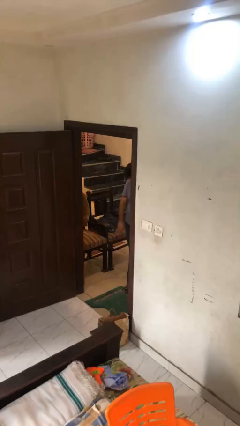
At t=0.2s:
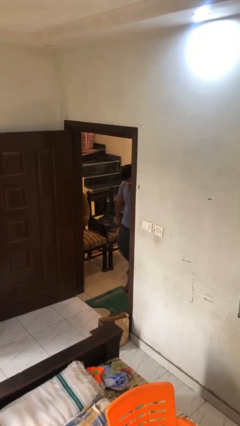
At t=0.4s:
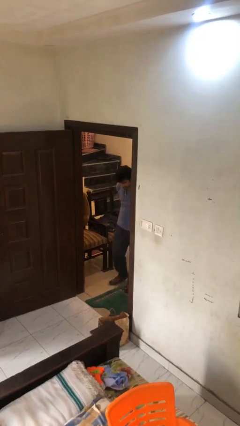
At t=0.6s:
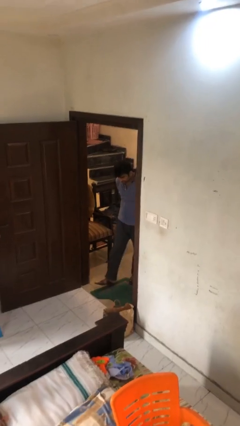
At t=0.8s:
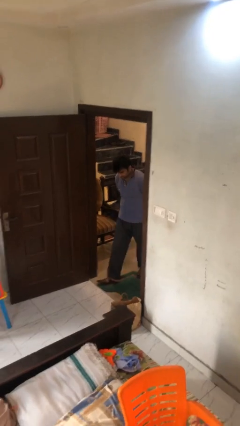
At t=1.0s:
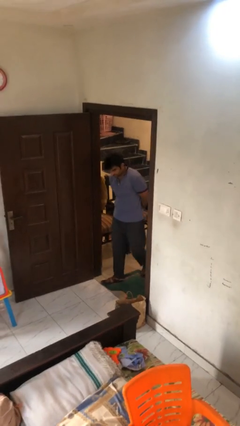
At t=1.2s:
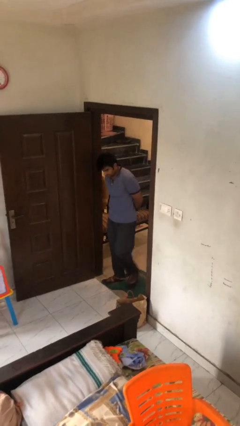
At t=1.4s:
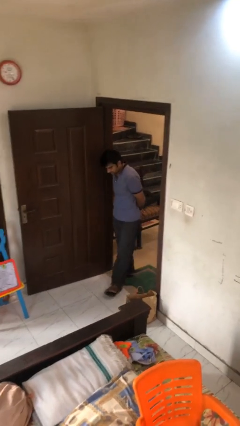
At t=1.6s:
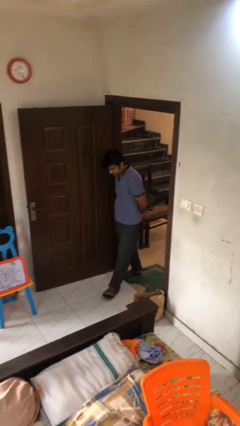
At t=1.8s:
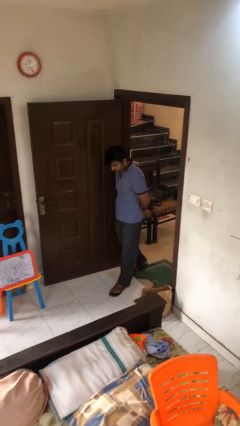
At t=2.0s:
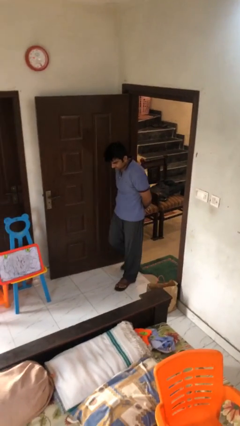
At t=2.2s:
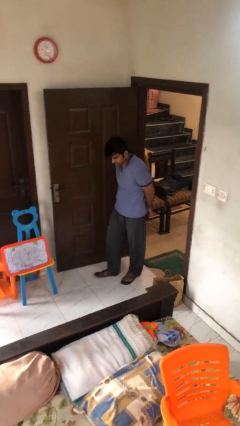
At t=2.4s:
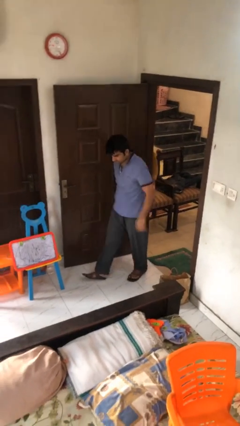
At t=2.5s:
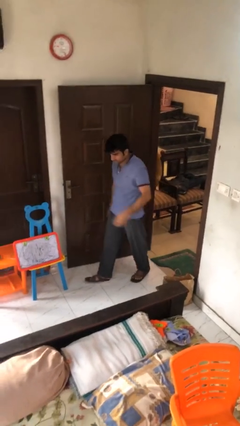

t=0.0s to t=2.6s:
person enters scene through structure

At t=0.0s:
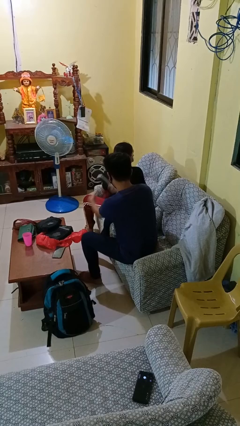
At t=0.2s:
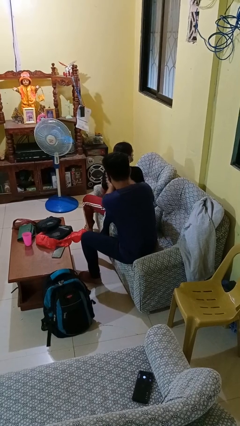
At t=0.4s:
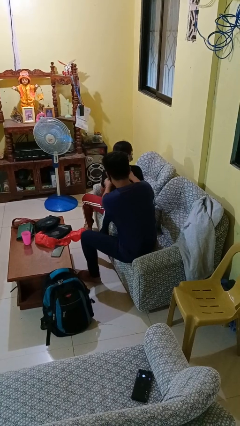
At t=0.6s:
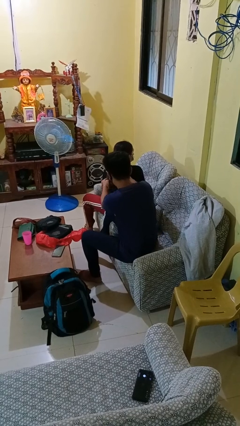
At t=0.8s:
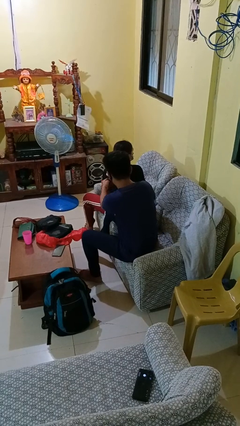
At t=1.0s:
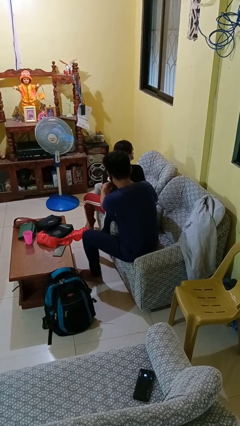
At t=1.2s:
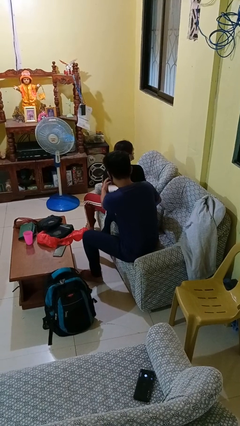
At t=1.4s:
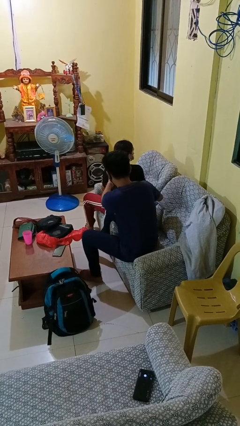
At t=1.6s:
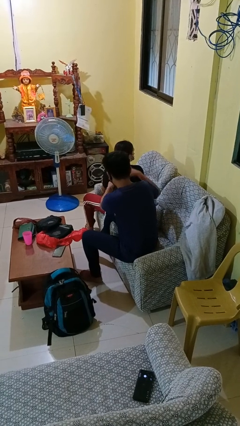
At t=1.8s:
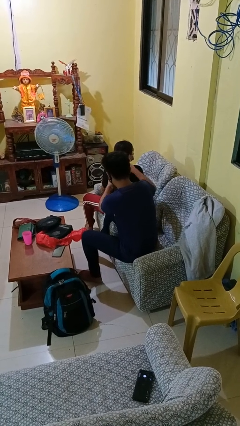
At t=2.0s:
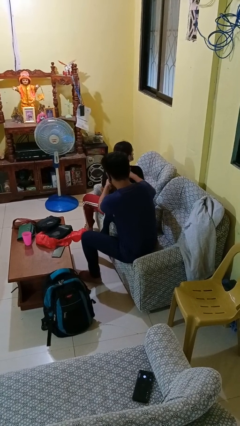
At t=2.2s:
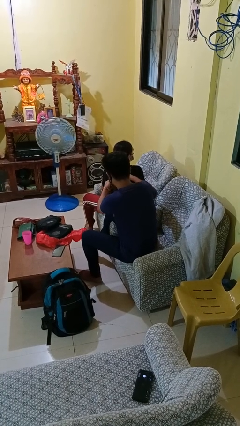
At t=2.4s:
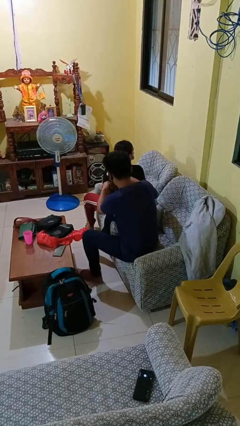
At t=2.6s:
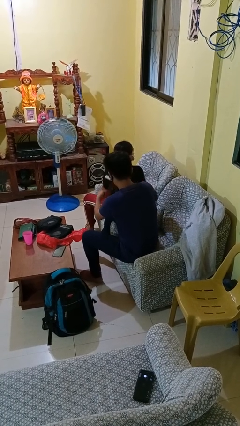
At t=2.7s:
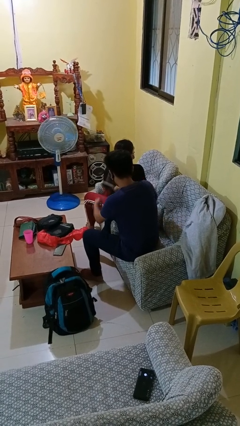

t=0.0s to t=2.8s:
person brushes hair of person

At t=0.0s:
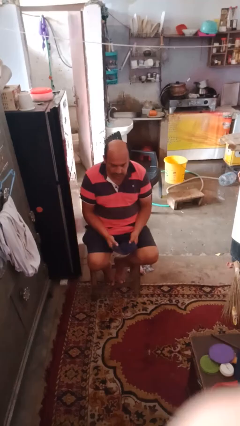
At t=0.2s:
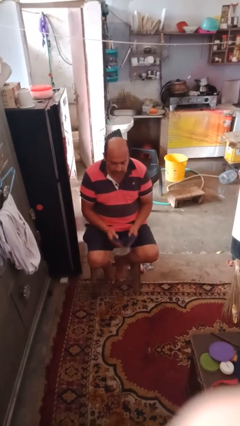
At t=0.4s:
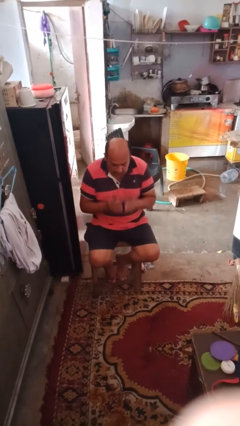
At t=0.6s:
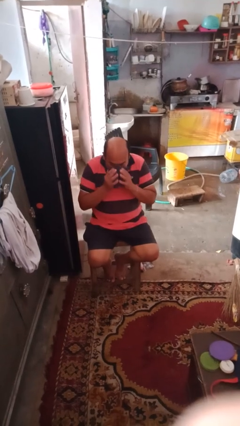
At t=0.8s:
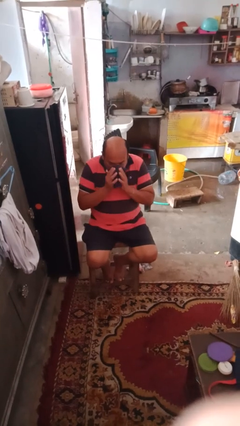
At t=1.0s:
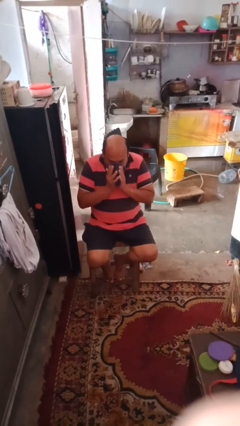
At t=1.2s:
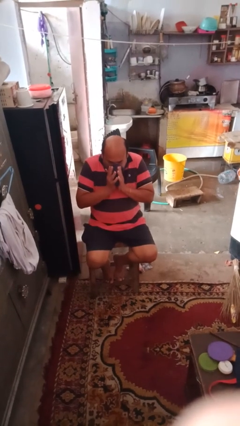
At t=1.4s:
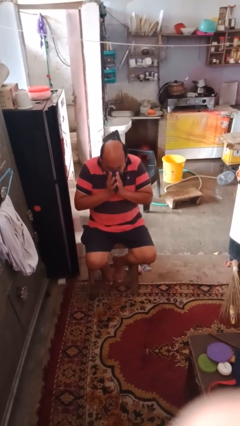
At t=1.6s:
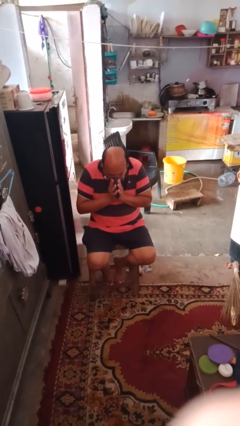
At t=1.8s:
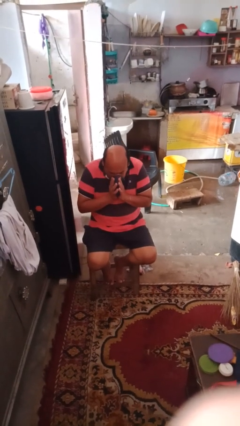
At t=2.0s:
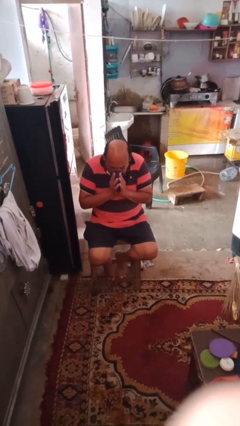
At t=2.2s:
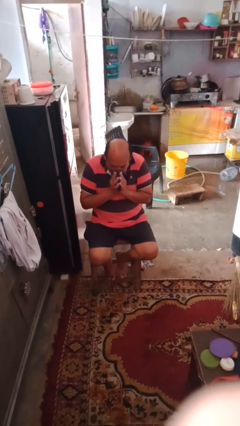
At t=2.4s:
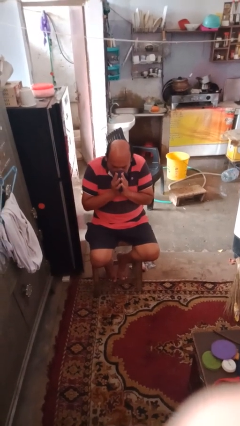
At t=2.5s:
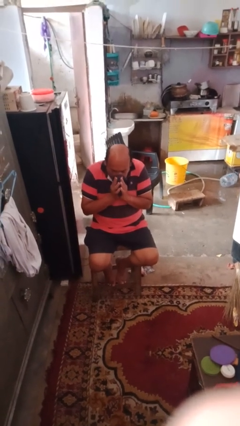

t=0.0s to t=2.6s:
person blows nose

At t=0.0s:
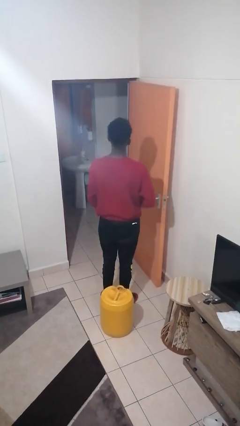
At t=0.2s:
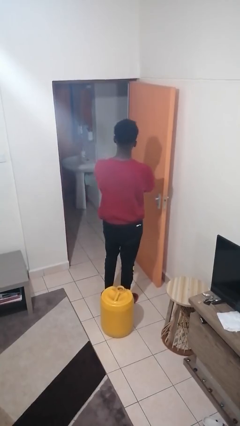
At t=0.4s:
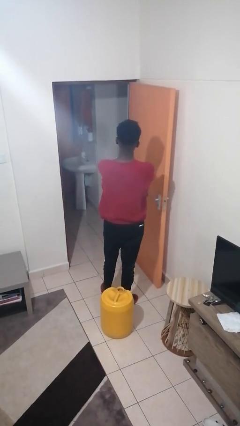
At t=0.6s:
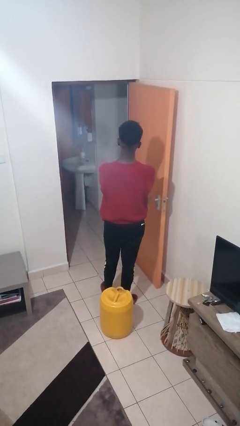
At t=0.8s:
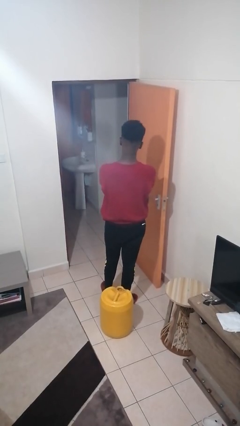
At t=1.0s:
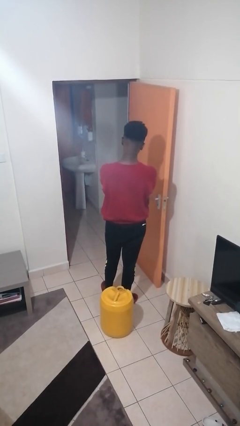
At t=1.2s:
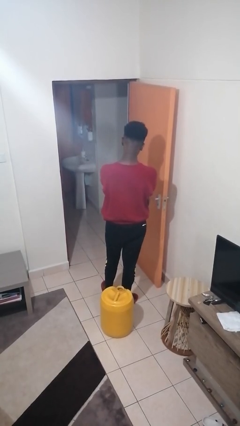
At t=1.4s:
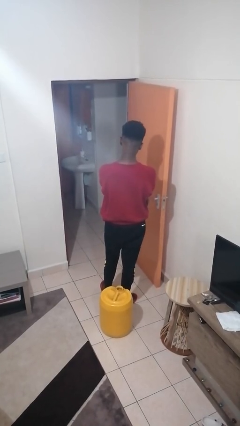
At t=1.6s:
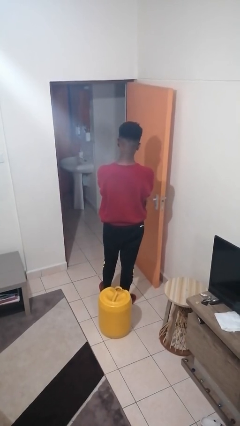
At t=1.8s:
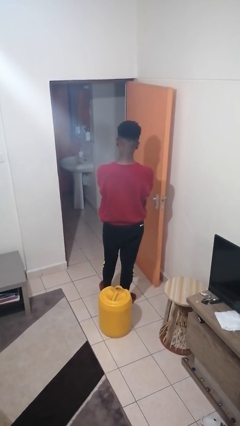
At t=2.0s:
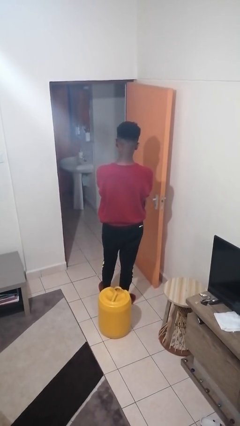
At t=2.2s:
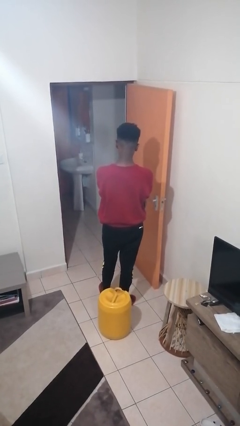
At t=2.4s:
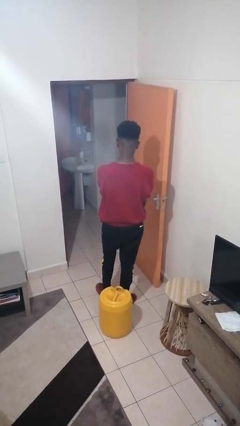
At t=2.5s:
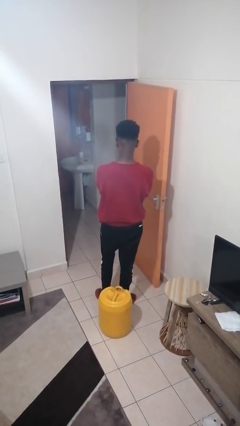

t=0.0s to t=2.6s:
person crosses arms

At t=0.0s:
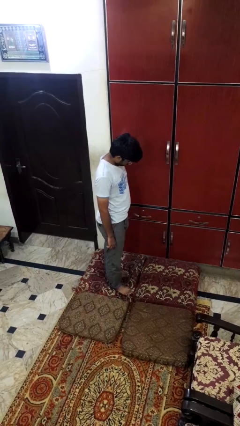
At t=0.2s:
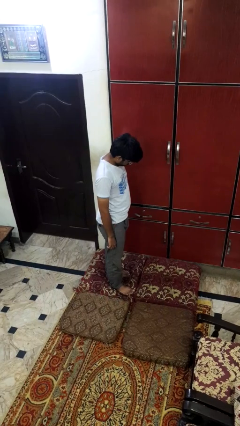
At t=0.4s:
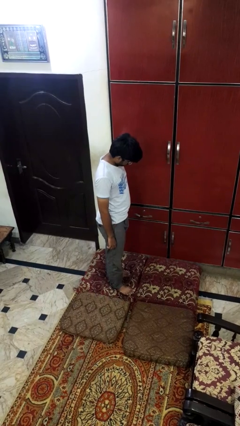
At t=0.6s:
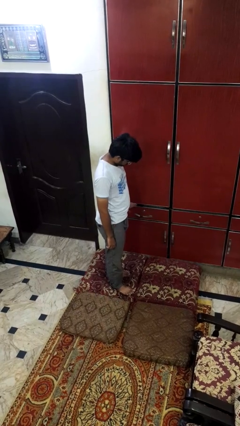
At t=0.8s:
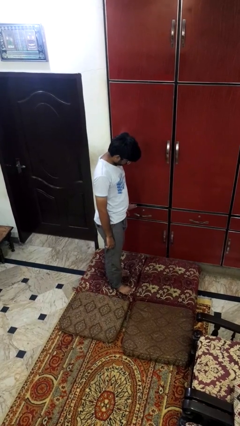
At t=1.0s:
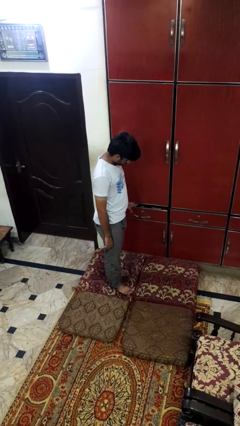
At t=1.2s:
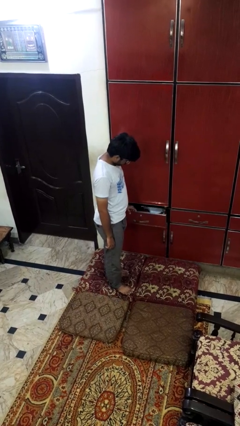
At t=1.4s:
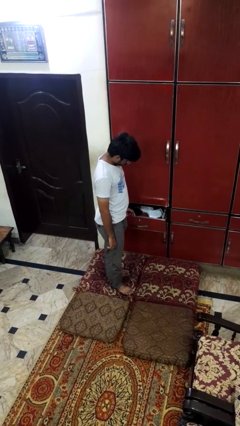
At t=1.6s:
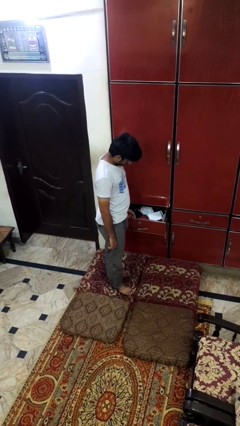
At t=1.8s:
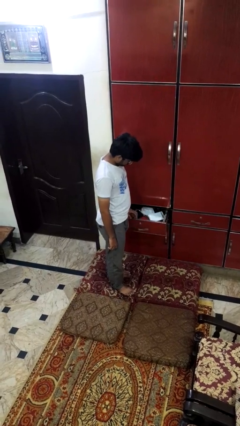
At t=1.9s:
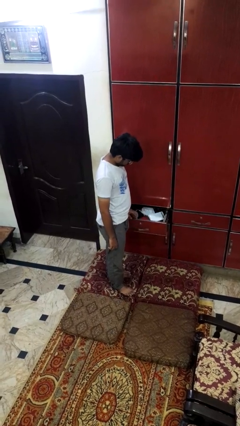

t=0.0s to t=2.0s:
person opens dresser drawer

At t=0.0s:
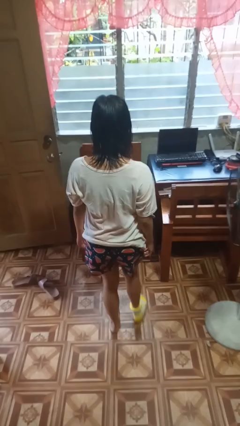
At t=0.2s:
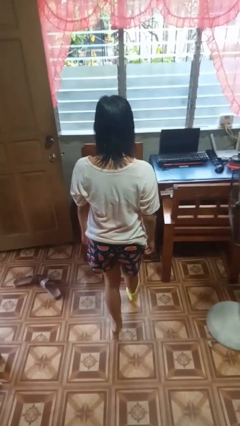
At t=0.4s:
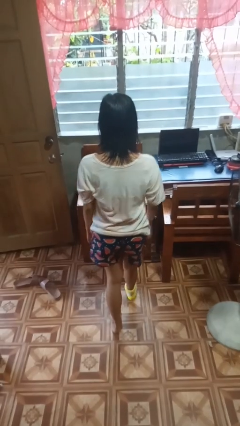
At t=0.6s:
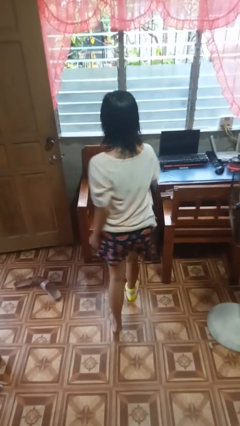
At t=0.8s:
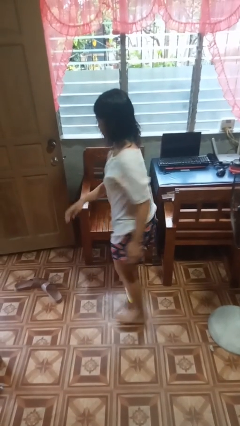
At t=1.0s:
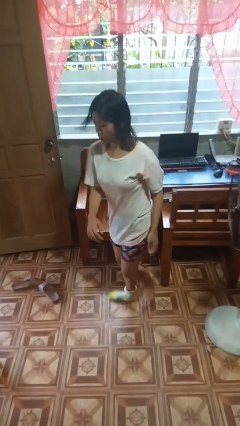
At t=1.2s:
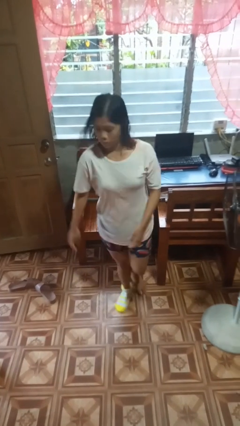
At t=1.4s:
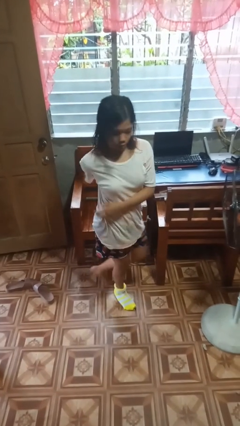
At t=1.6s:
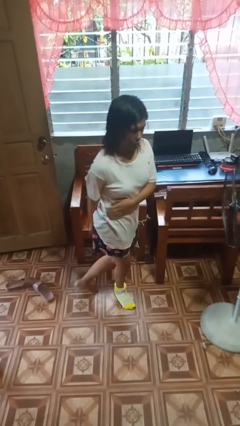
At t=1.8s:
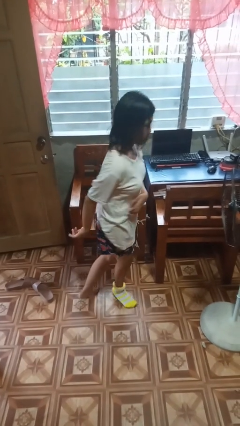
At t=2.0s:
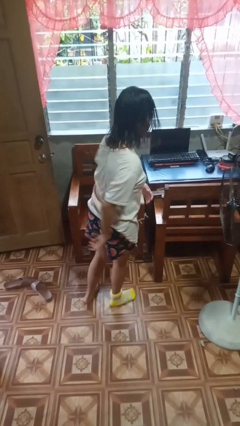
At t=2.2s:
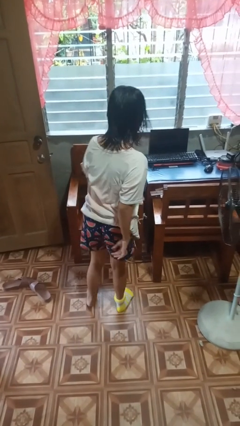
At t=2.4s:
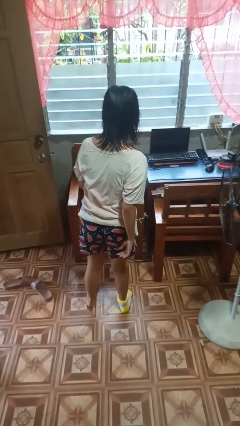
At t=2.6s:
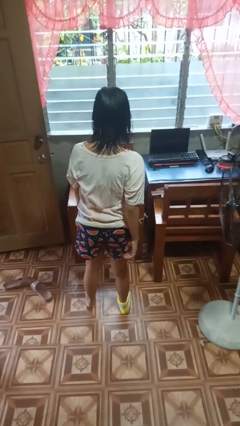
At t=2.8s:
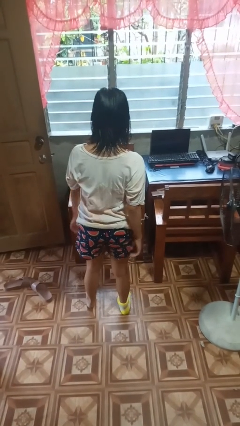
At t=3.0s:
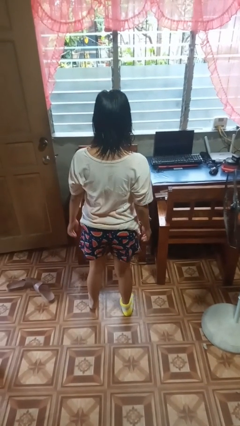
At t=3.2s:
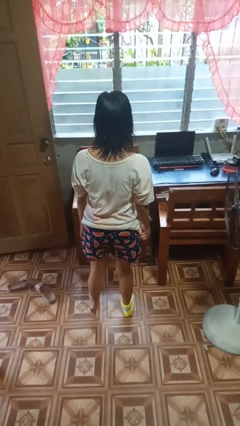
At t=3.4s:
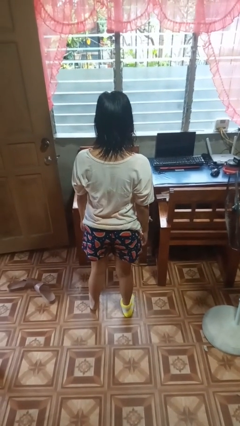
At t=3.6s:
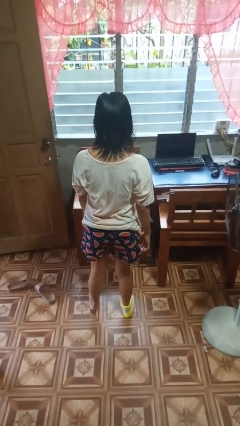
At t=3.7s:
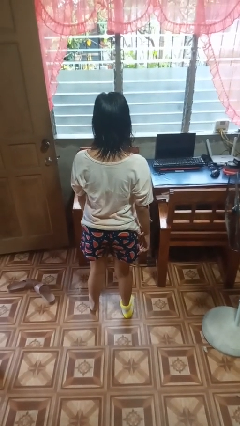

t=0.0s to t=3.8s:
person twirls

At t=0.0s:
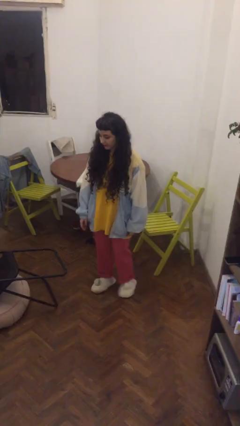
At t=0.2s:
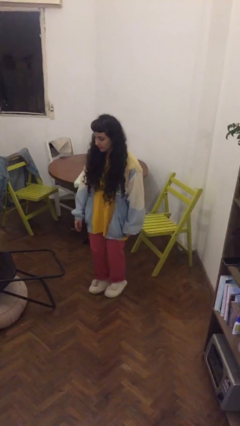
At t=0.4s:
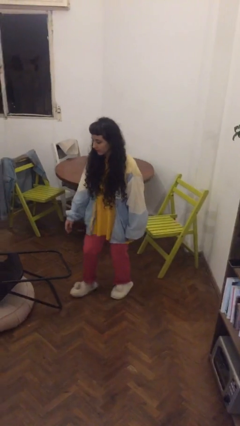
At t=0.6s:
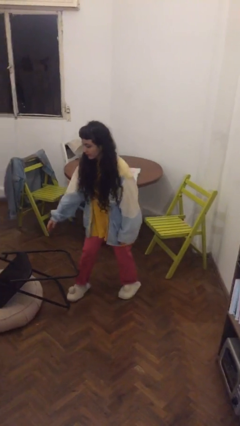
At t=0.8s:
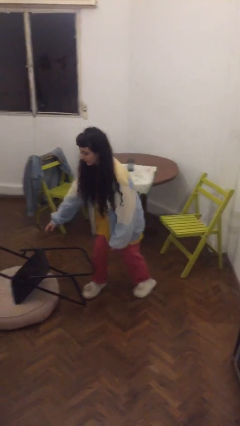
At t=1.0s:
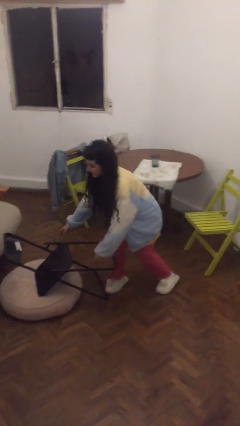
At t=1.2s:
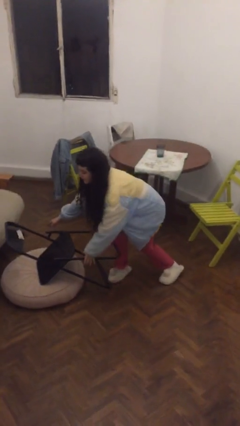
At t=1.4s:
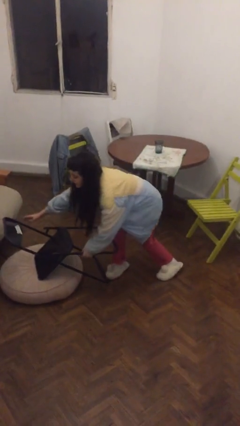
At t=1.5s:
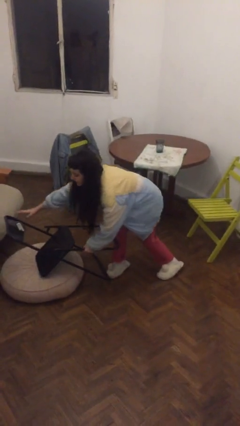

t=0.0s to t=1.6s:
person sets upright furniture
